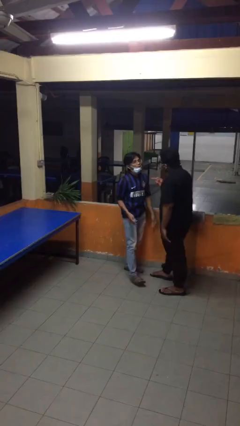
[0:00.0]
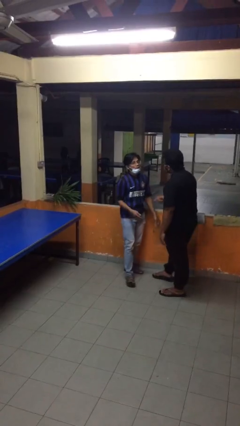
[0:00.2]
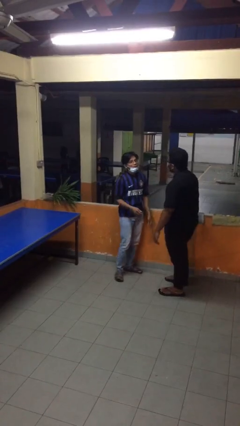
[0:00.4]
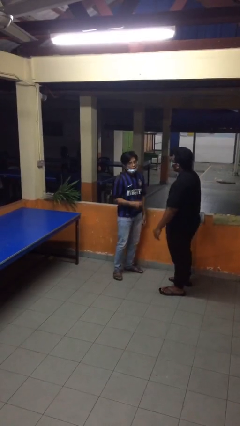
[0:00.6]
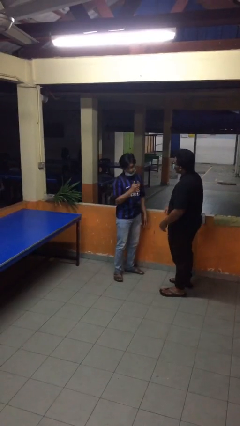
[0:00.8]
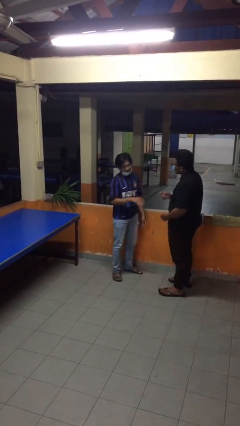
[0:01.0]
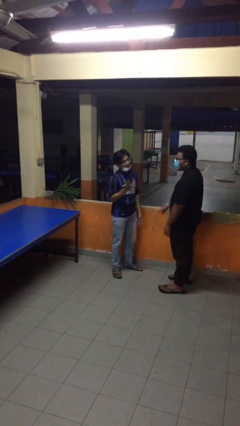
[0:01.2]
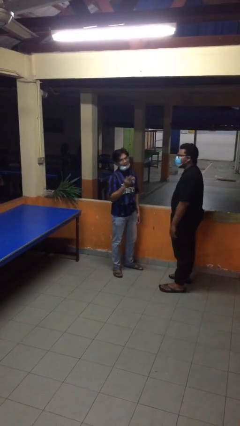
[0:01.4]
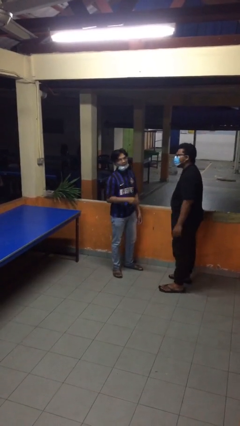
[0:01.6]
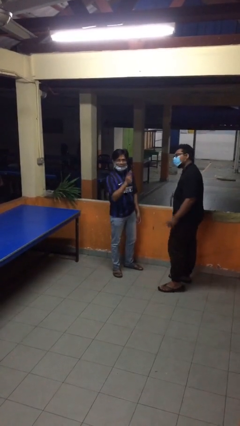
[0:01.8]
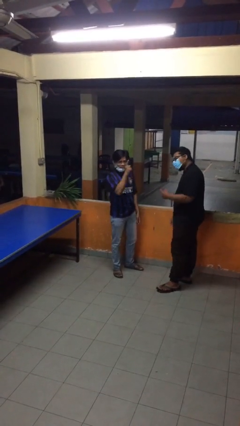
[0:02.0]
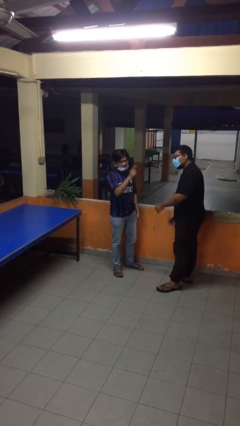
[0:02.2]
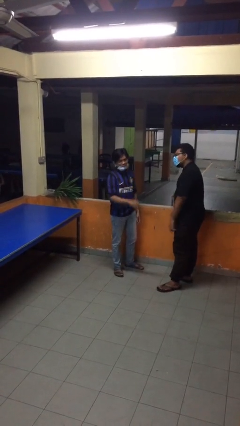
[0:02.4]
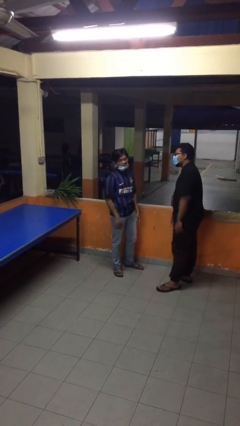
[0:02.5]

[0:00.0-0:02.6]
person talks to person

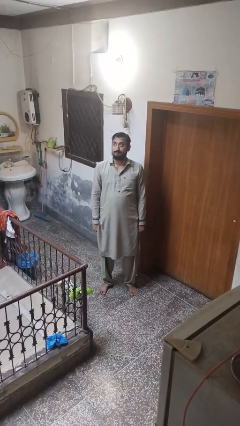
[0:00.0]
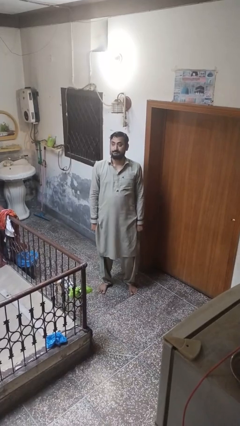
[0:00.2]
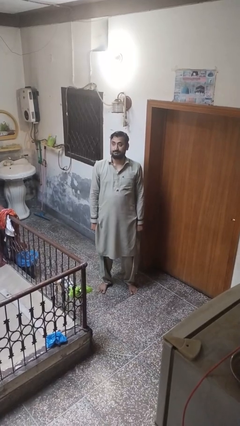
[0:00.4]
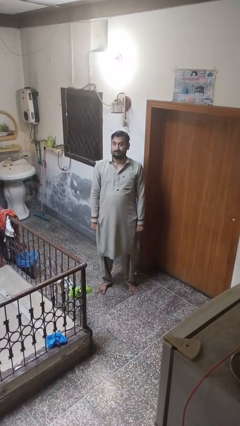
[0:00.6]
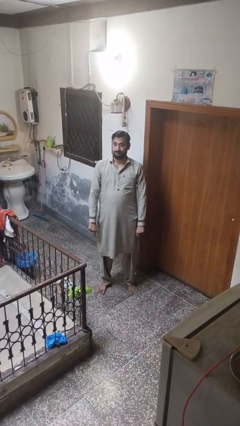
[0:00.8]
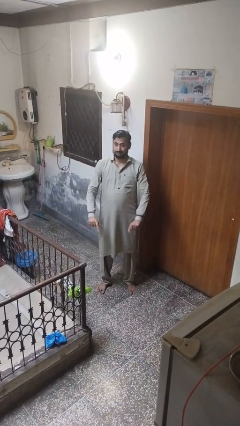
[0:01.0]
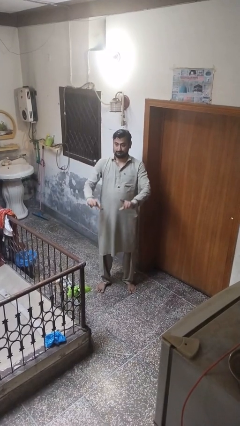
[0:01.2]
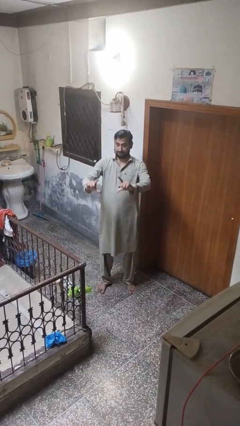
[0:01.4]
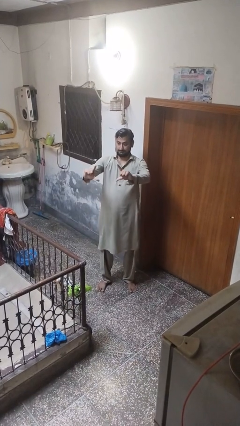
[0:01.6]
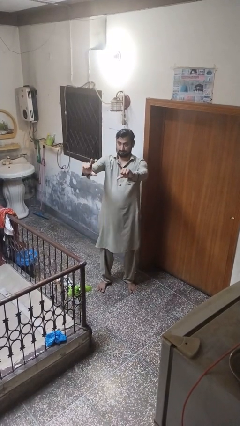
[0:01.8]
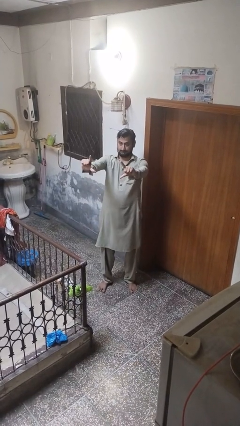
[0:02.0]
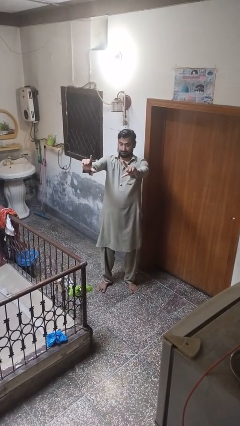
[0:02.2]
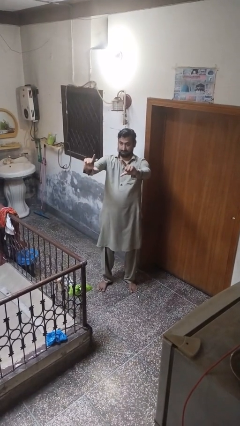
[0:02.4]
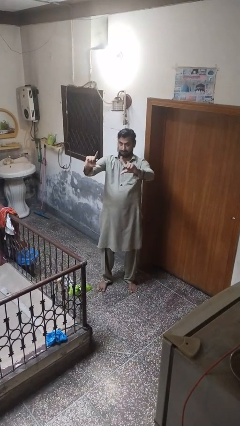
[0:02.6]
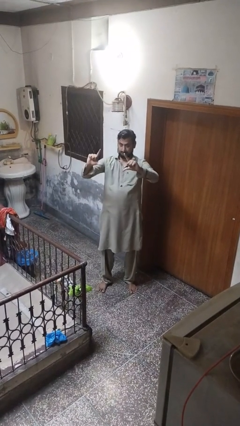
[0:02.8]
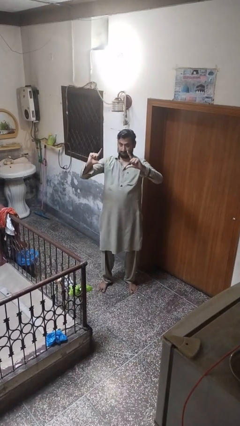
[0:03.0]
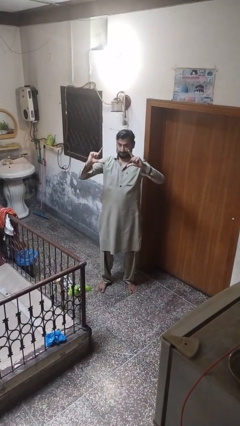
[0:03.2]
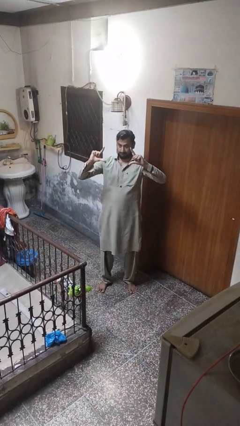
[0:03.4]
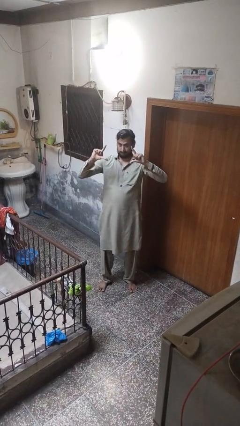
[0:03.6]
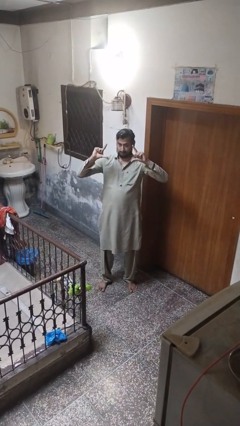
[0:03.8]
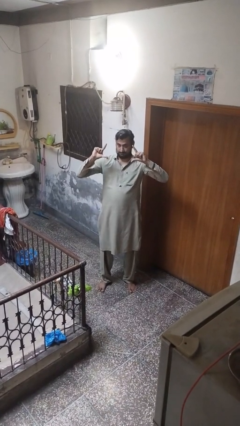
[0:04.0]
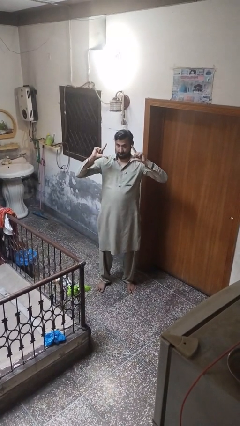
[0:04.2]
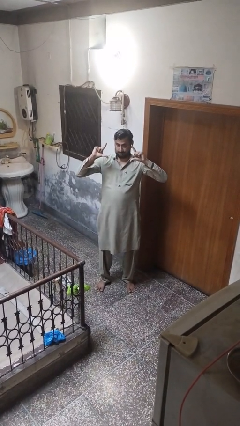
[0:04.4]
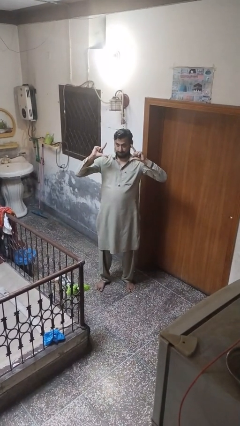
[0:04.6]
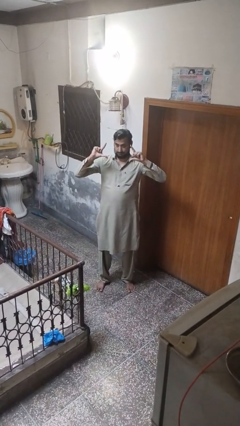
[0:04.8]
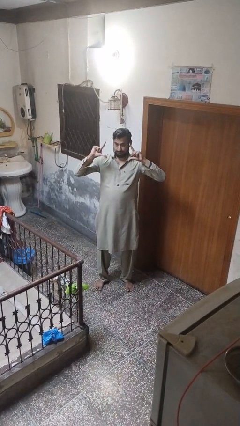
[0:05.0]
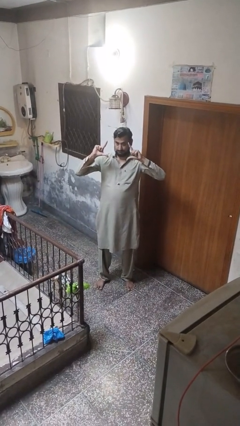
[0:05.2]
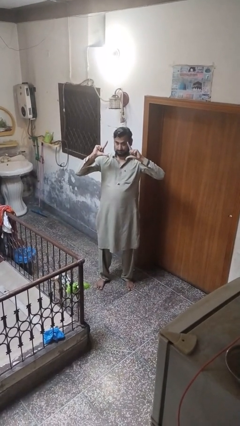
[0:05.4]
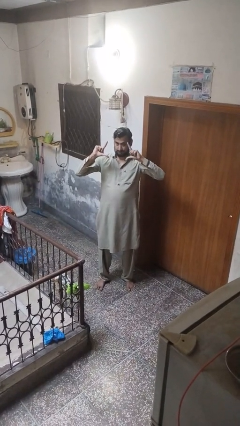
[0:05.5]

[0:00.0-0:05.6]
person gestures zoom in

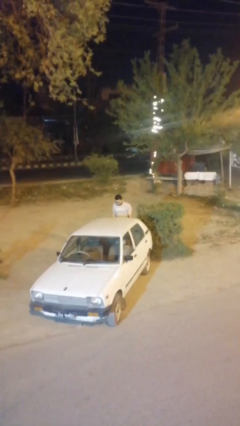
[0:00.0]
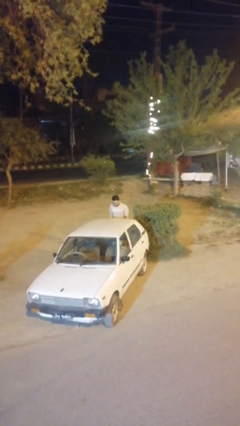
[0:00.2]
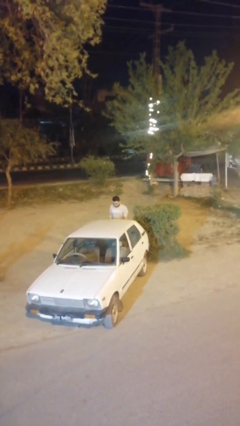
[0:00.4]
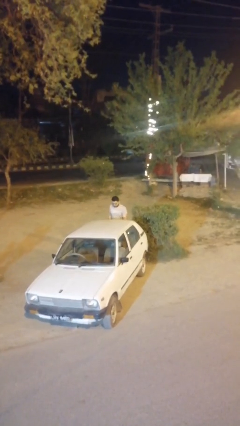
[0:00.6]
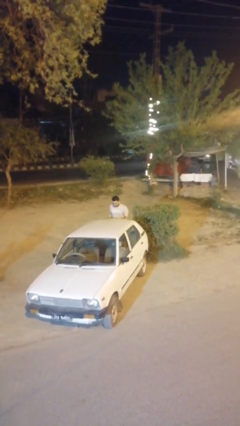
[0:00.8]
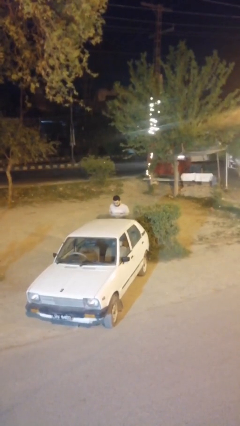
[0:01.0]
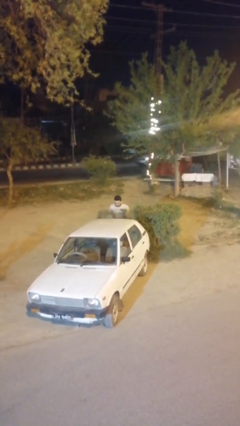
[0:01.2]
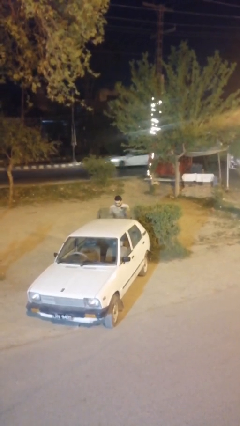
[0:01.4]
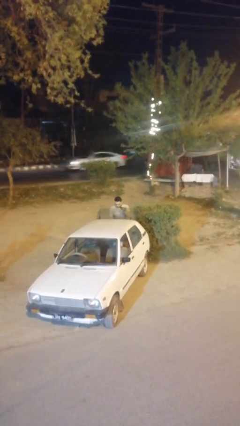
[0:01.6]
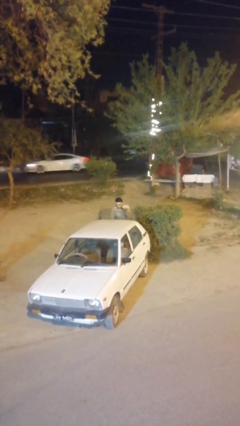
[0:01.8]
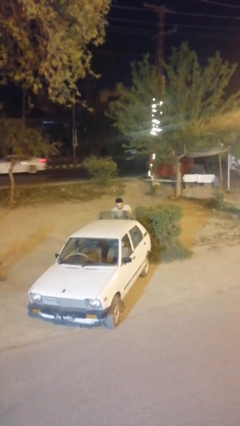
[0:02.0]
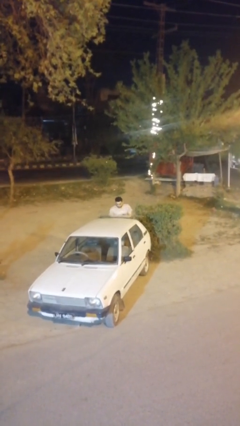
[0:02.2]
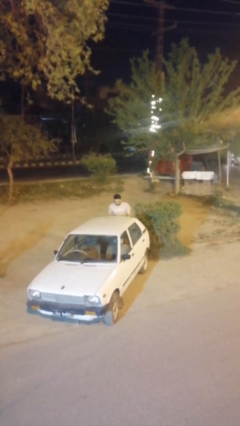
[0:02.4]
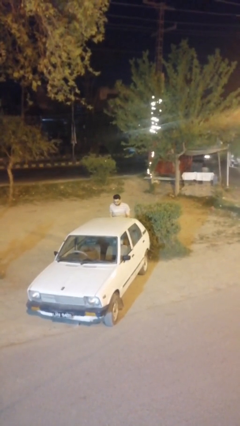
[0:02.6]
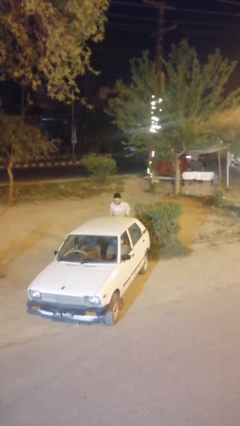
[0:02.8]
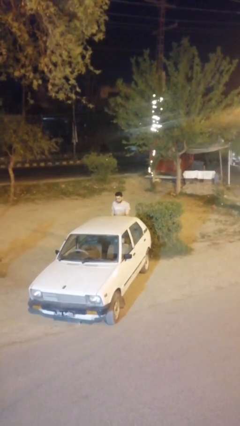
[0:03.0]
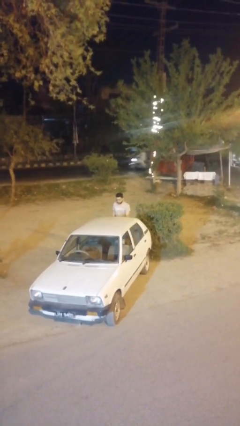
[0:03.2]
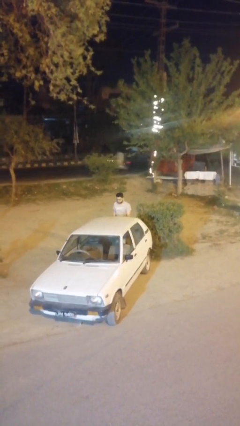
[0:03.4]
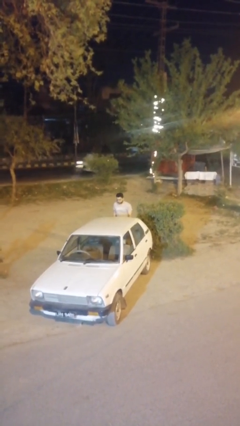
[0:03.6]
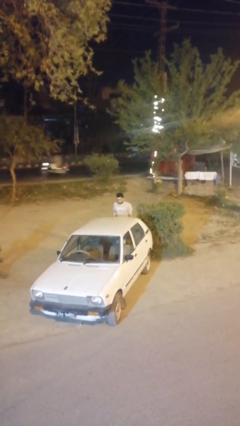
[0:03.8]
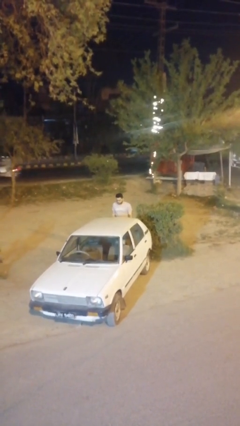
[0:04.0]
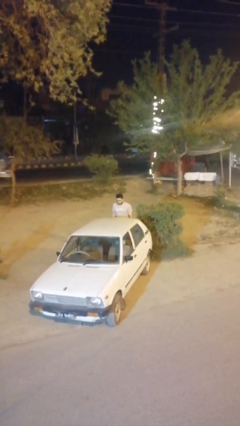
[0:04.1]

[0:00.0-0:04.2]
person loads car

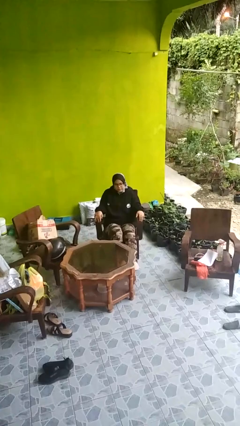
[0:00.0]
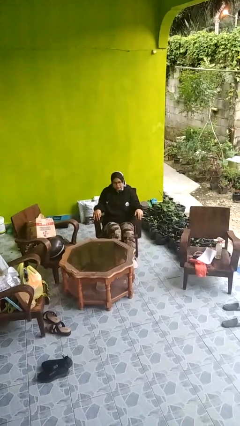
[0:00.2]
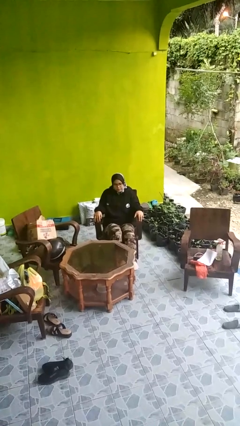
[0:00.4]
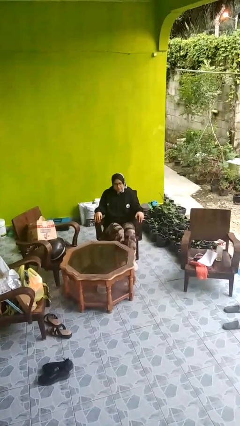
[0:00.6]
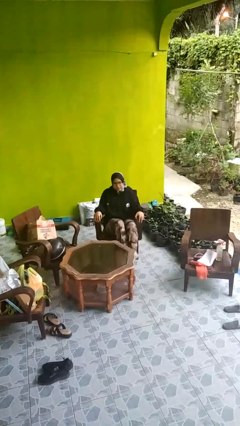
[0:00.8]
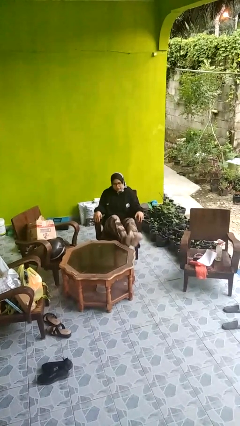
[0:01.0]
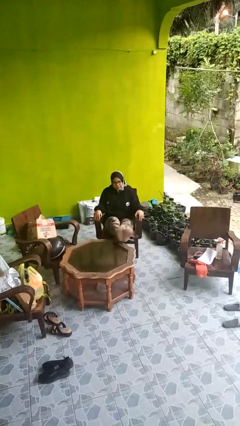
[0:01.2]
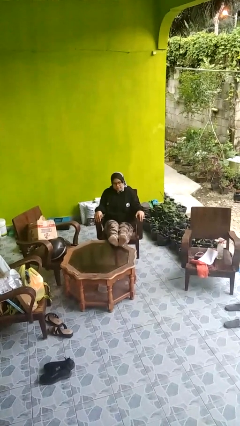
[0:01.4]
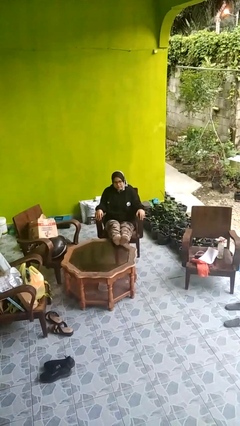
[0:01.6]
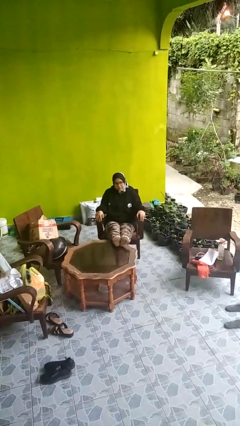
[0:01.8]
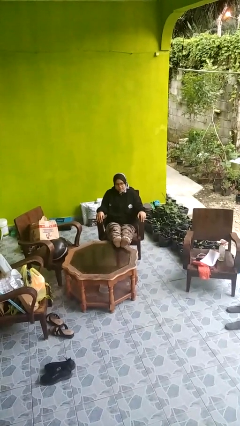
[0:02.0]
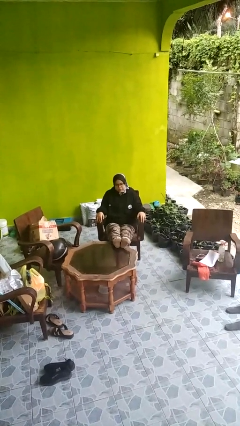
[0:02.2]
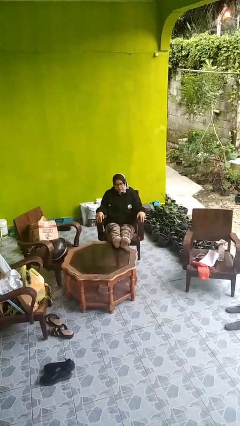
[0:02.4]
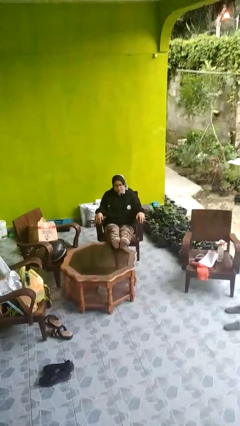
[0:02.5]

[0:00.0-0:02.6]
person puts feet up

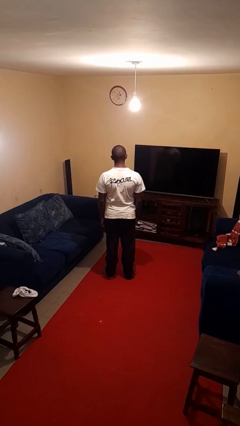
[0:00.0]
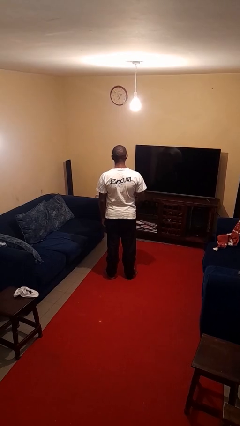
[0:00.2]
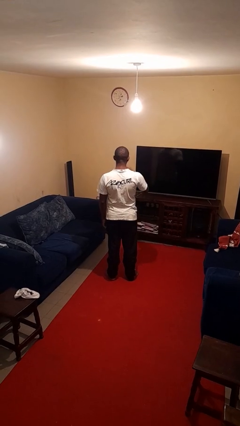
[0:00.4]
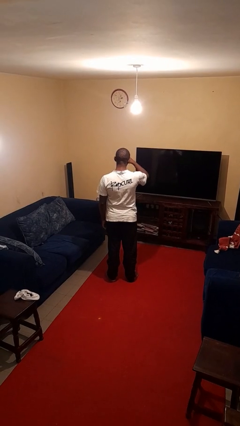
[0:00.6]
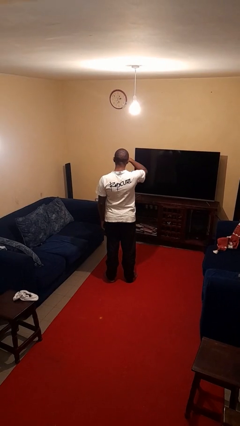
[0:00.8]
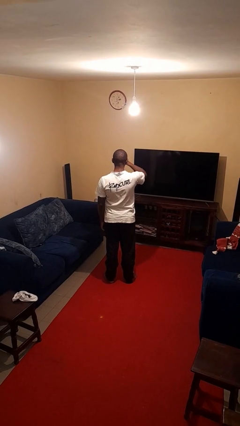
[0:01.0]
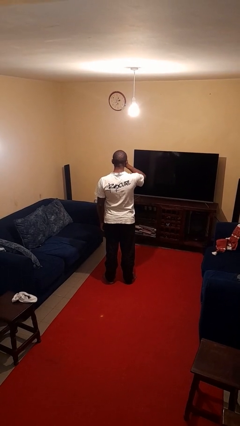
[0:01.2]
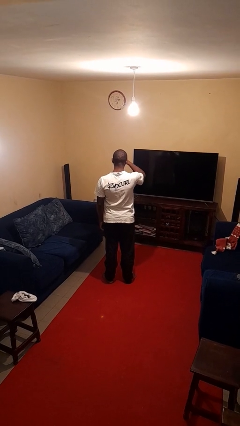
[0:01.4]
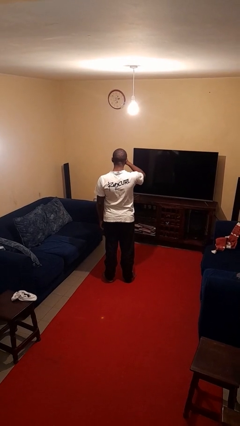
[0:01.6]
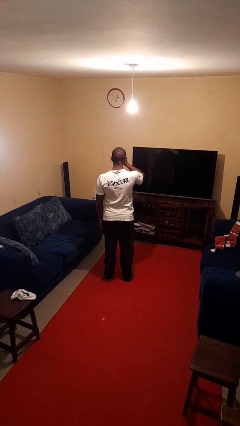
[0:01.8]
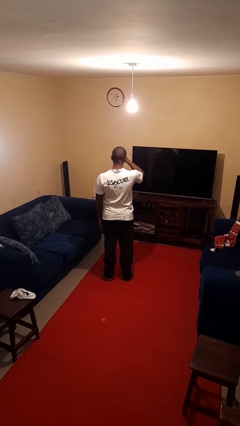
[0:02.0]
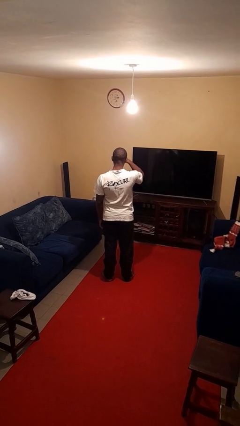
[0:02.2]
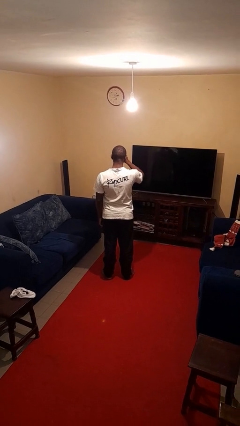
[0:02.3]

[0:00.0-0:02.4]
person rubs eyes
